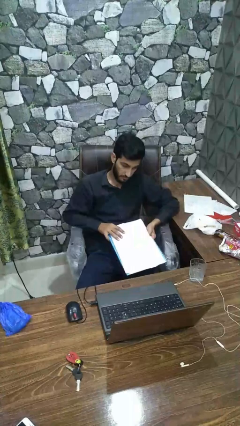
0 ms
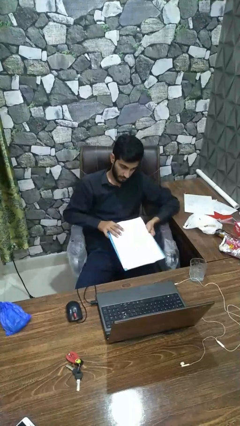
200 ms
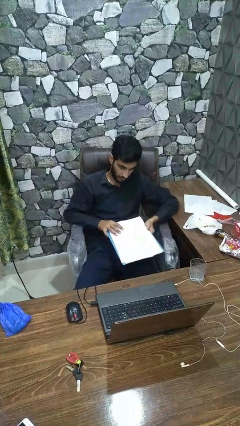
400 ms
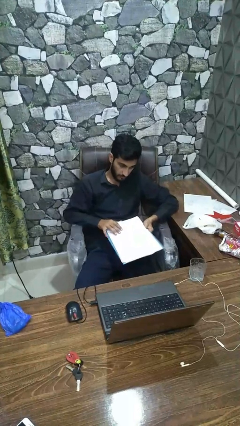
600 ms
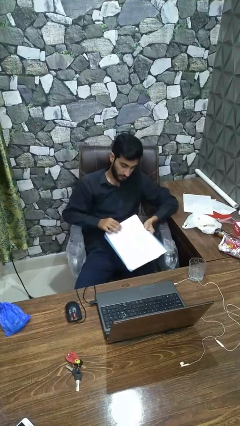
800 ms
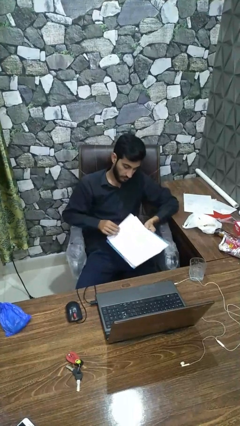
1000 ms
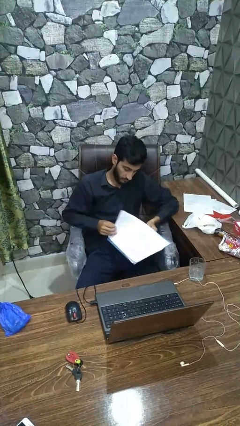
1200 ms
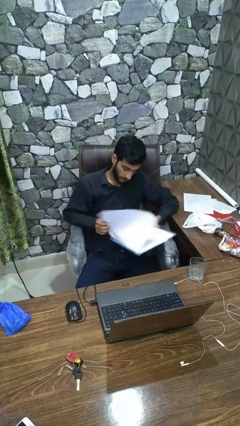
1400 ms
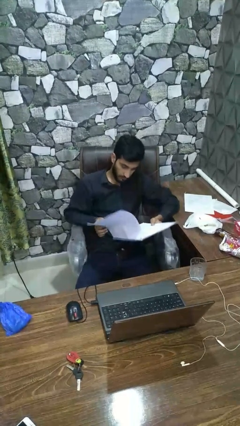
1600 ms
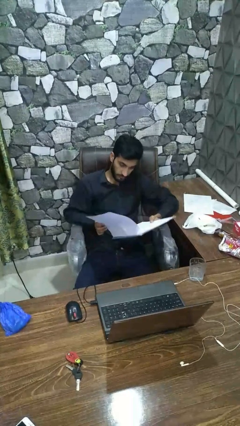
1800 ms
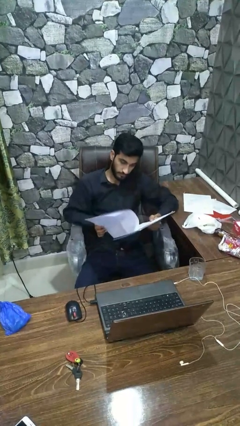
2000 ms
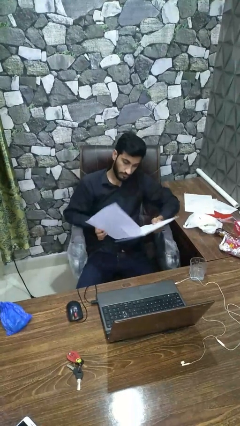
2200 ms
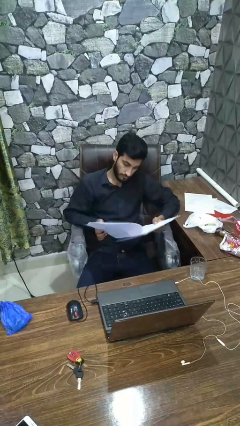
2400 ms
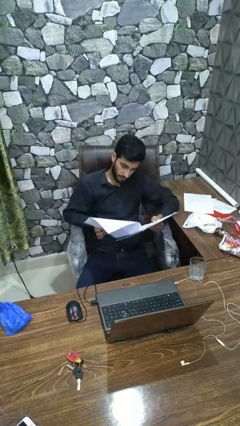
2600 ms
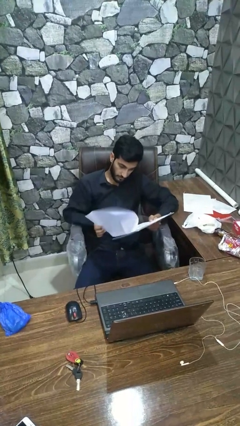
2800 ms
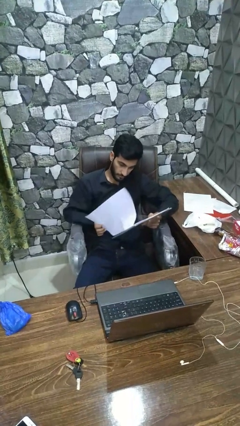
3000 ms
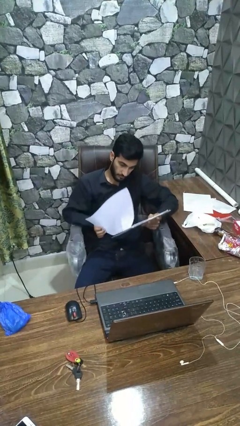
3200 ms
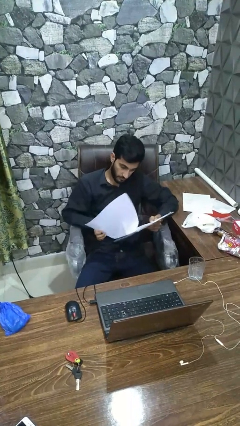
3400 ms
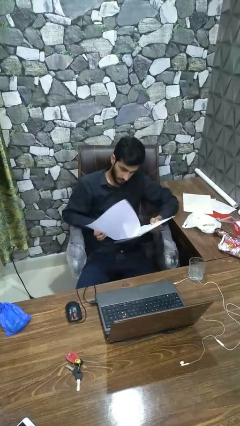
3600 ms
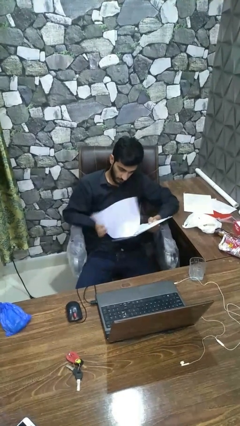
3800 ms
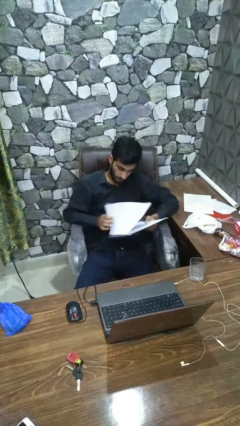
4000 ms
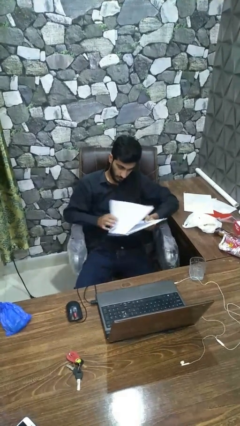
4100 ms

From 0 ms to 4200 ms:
person reads book

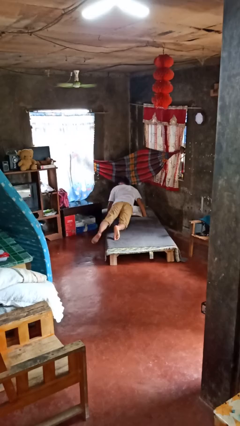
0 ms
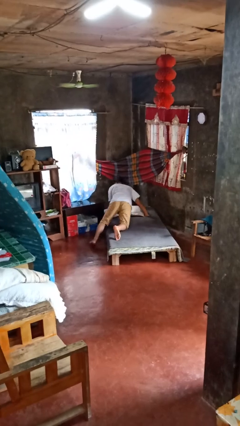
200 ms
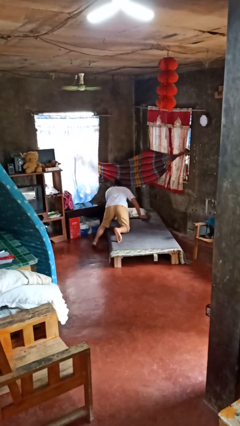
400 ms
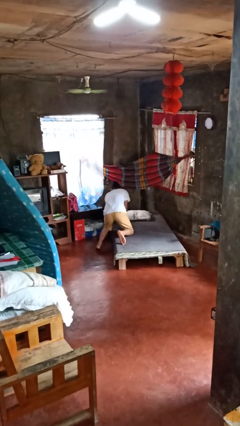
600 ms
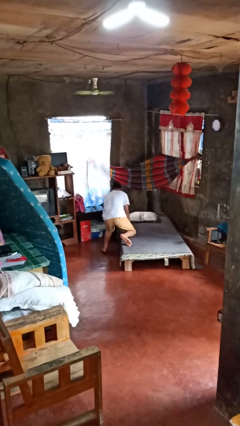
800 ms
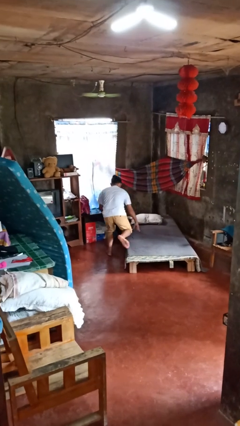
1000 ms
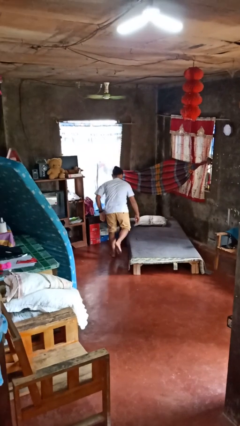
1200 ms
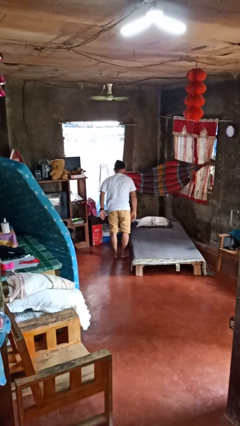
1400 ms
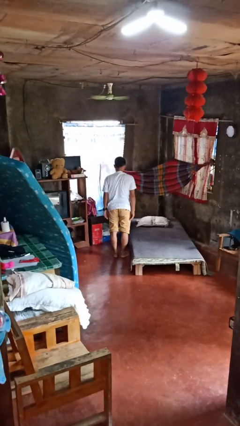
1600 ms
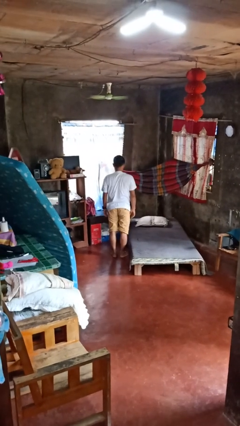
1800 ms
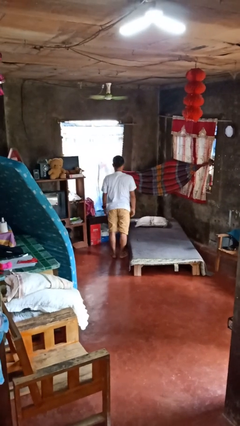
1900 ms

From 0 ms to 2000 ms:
person stands up

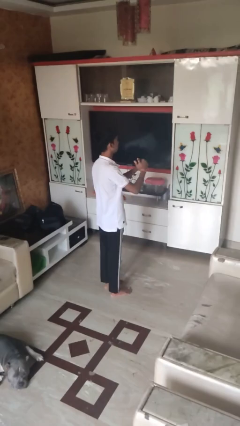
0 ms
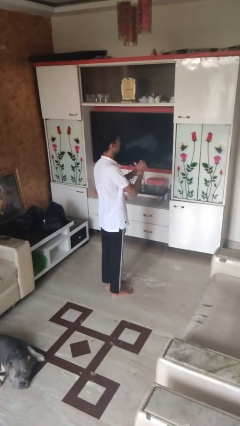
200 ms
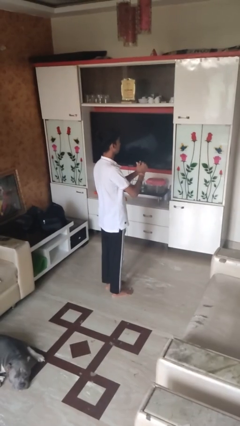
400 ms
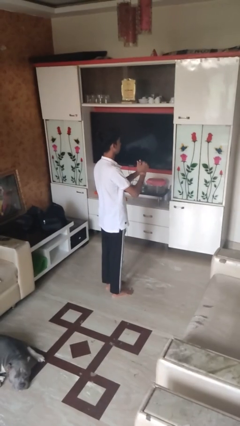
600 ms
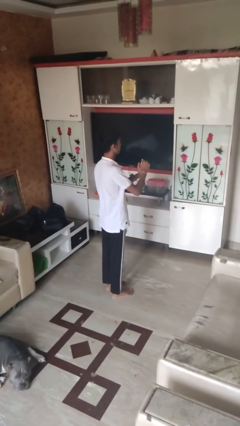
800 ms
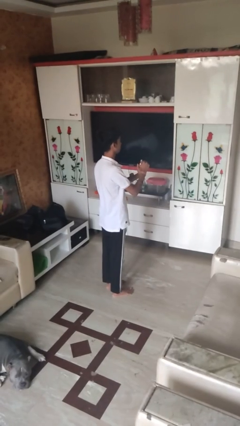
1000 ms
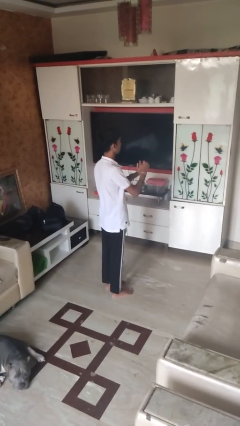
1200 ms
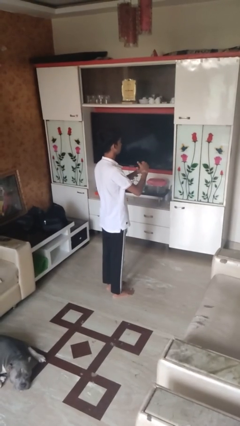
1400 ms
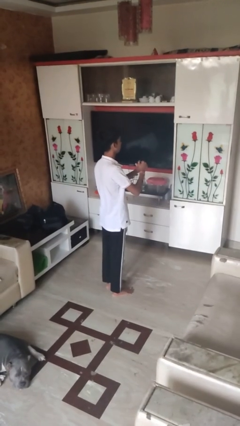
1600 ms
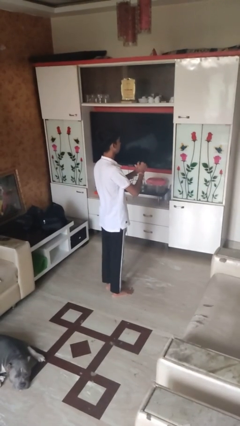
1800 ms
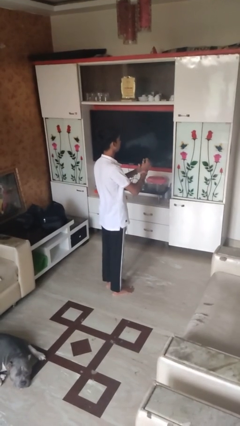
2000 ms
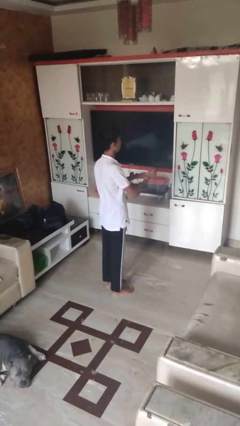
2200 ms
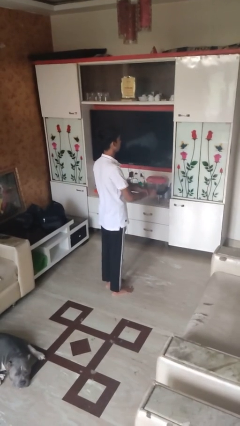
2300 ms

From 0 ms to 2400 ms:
person cracks knuckles

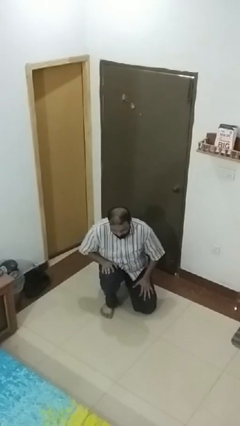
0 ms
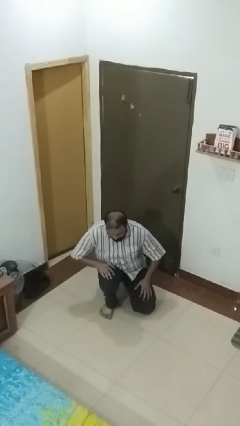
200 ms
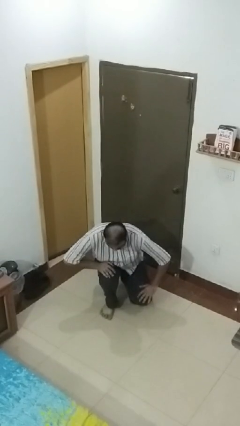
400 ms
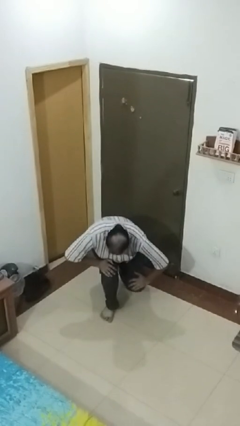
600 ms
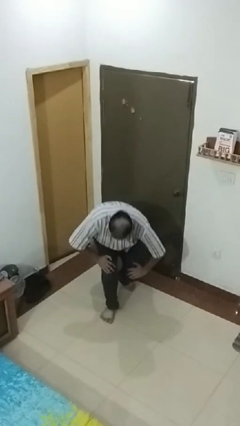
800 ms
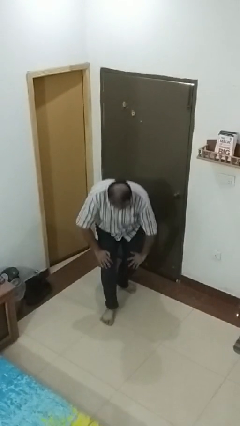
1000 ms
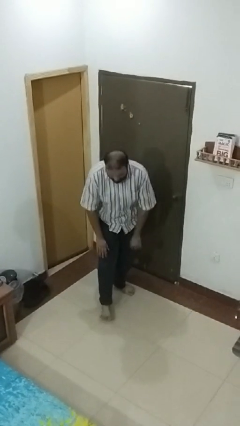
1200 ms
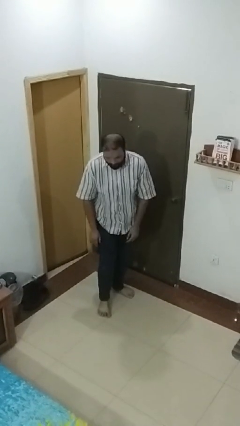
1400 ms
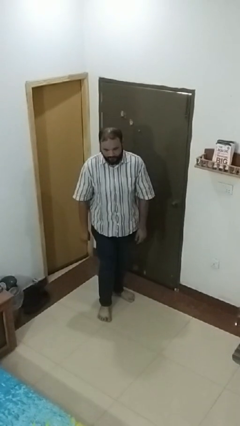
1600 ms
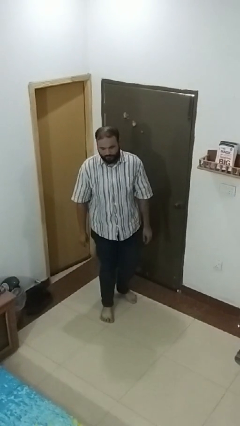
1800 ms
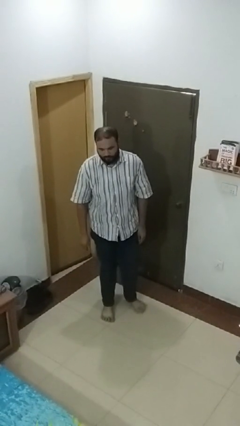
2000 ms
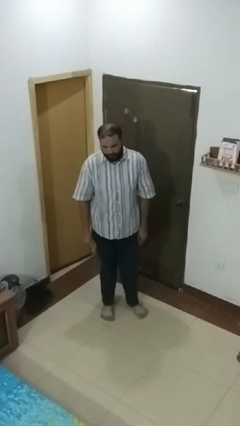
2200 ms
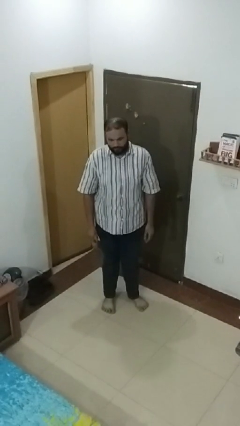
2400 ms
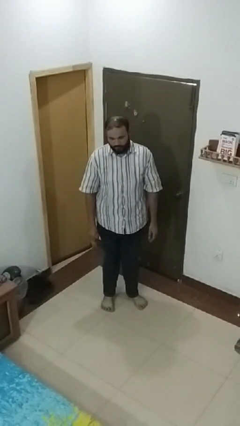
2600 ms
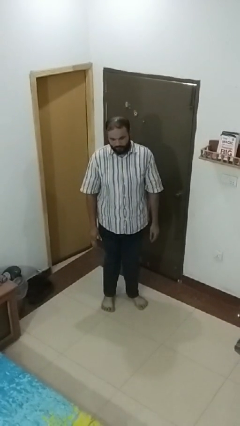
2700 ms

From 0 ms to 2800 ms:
person stands up from floor

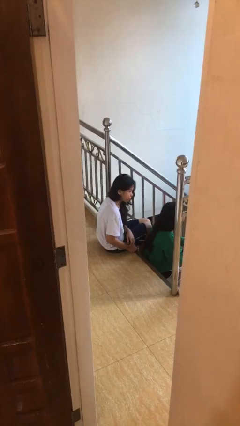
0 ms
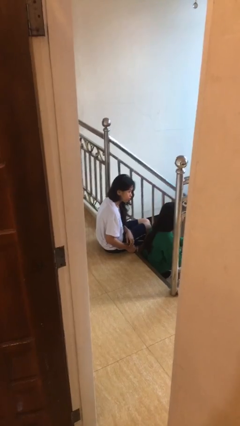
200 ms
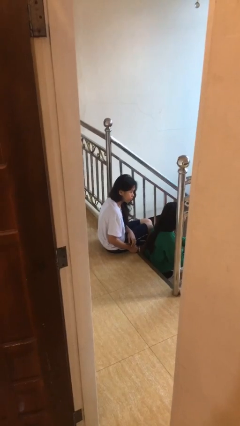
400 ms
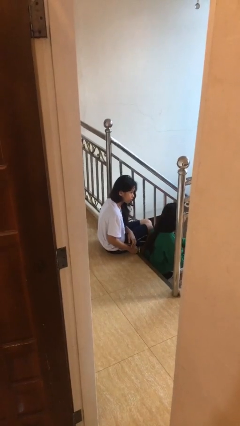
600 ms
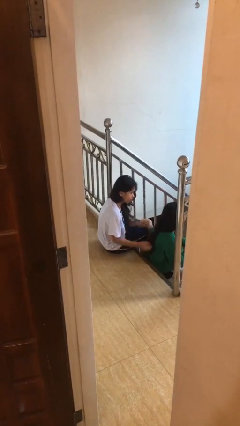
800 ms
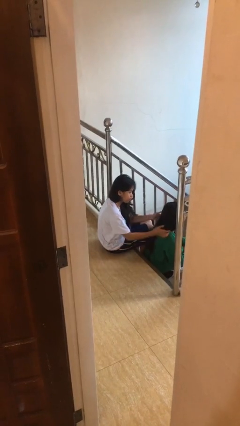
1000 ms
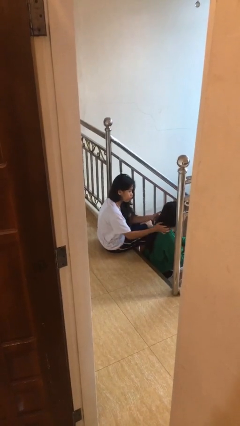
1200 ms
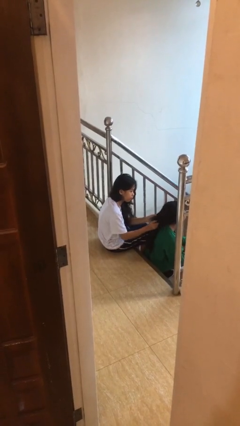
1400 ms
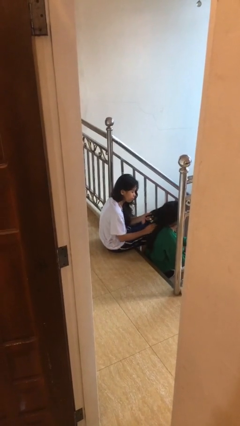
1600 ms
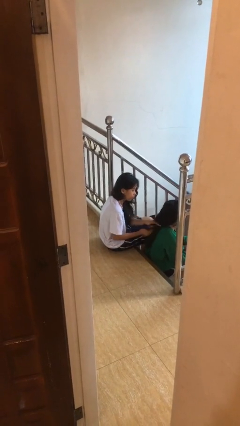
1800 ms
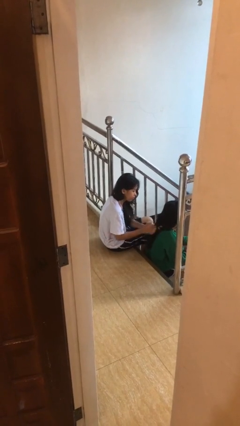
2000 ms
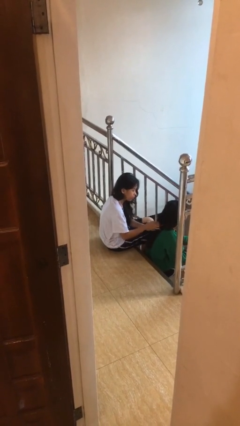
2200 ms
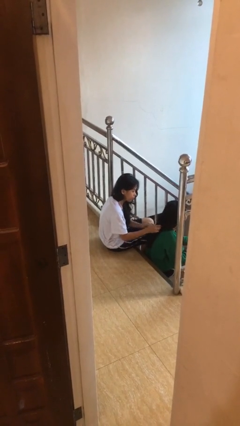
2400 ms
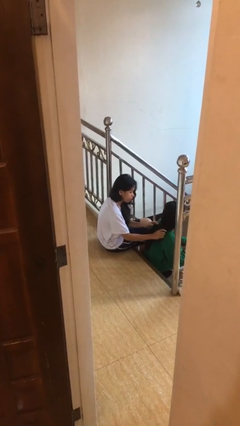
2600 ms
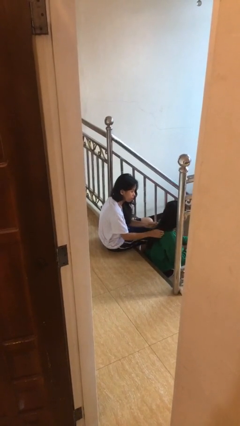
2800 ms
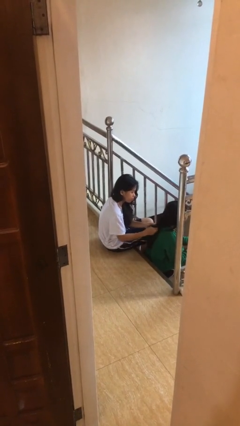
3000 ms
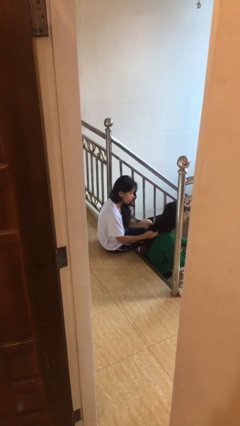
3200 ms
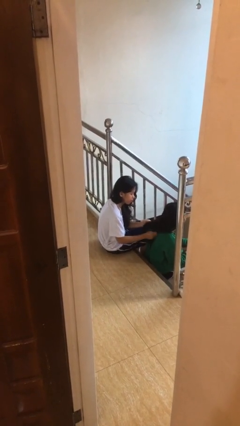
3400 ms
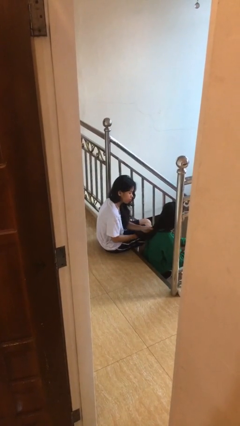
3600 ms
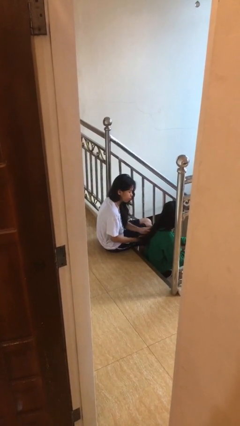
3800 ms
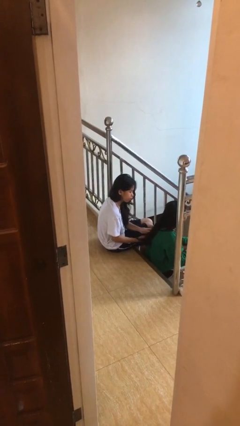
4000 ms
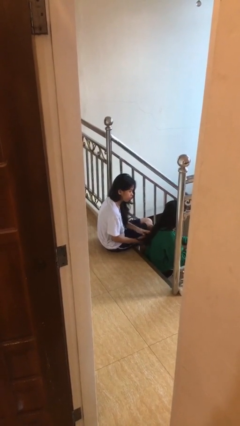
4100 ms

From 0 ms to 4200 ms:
person braids hair of person

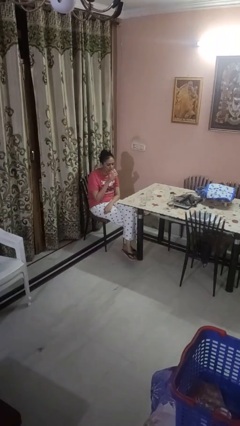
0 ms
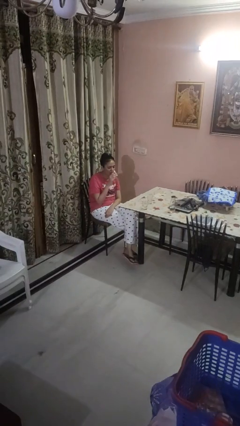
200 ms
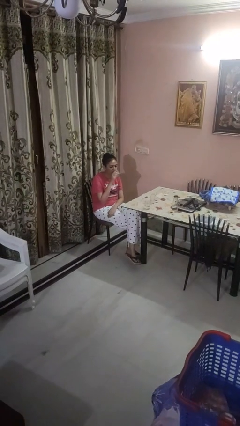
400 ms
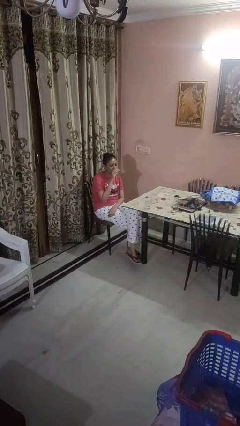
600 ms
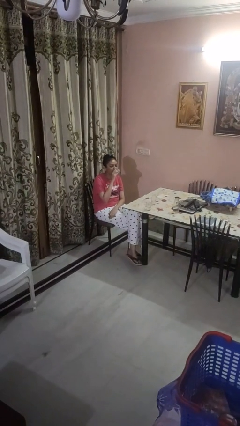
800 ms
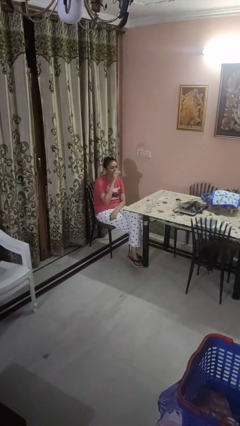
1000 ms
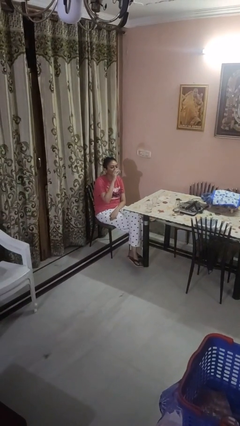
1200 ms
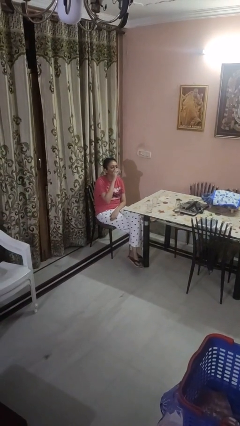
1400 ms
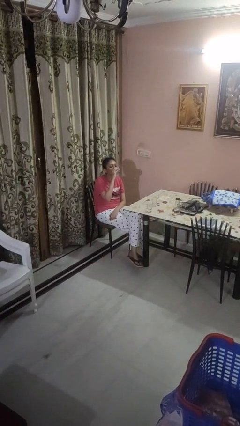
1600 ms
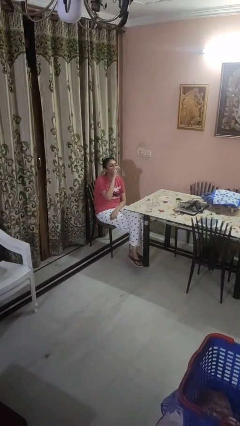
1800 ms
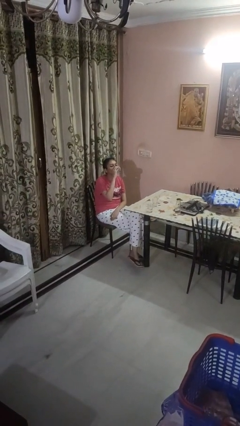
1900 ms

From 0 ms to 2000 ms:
person drinks from shotglass
